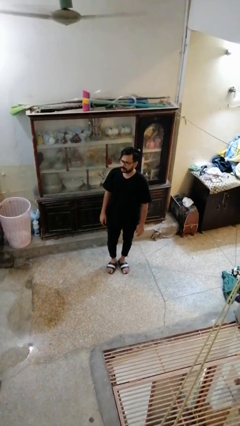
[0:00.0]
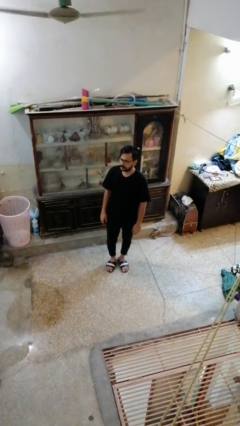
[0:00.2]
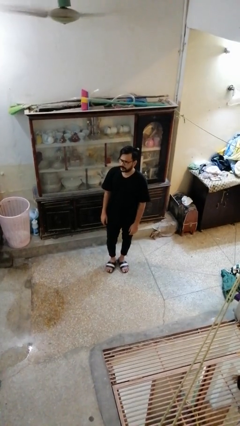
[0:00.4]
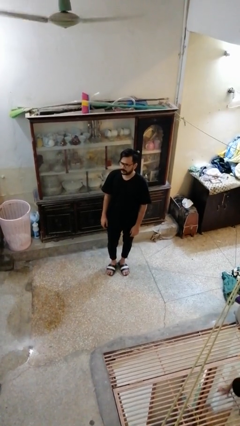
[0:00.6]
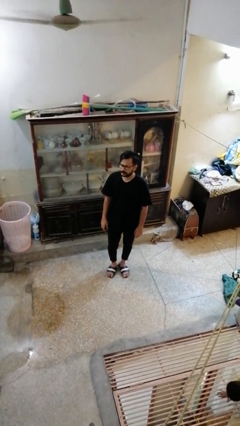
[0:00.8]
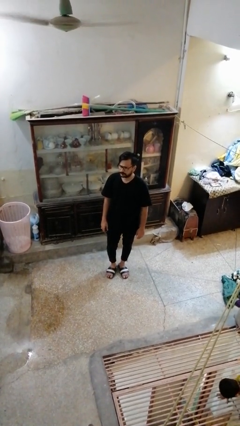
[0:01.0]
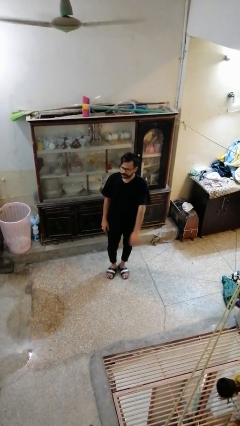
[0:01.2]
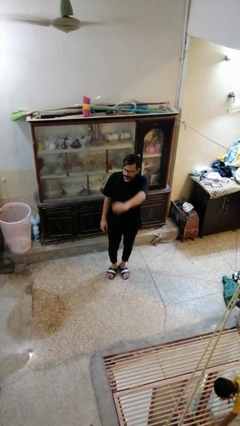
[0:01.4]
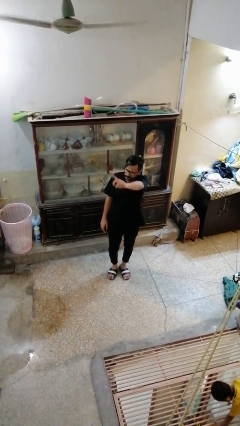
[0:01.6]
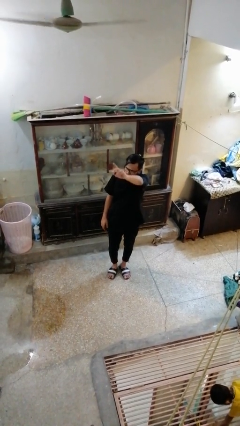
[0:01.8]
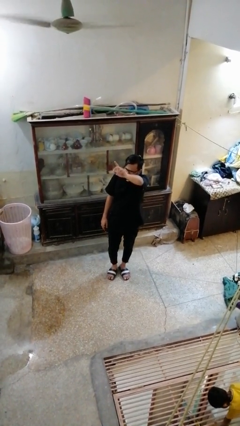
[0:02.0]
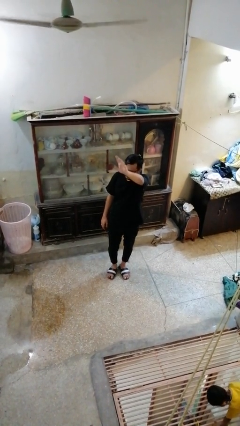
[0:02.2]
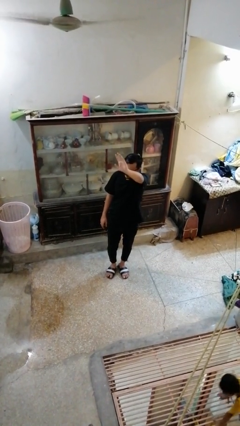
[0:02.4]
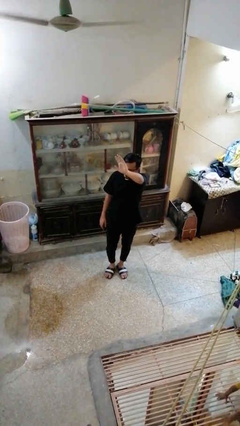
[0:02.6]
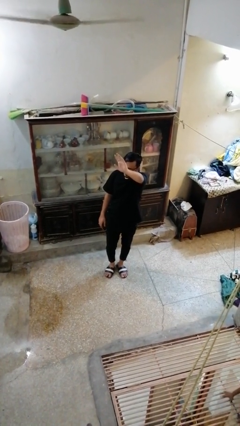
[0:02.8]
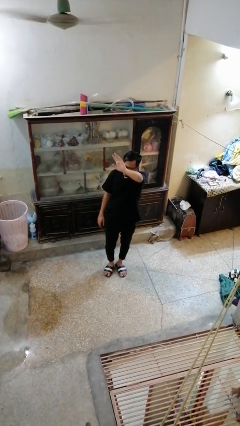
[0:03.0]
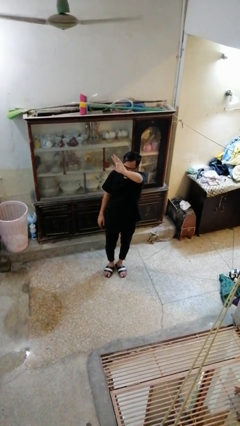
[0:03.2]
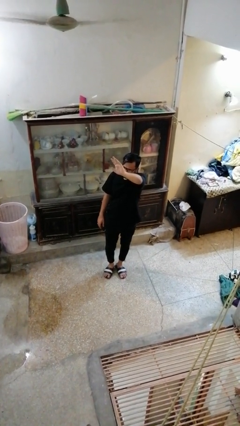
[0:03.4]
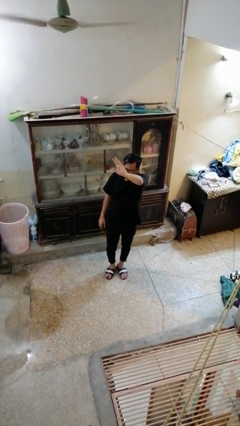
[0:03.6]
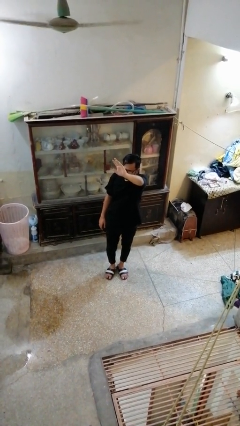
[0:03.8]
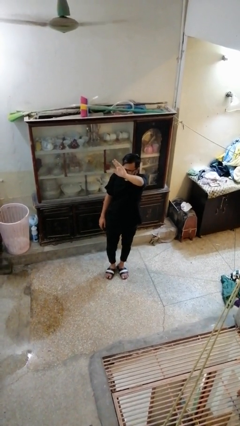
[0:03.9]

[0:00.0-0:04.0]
person gestures raise hand

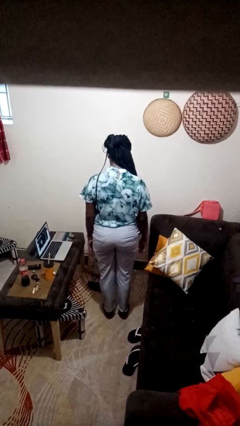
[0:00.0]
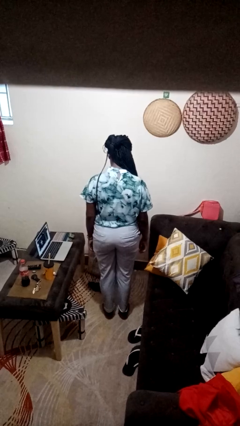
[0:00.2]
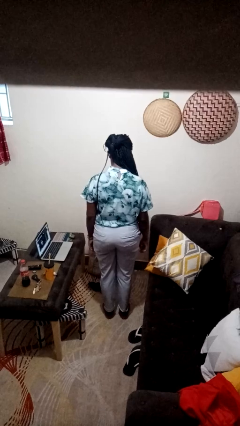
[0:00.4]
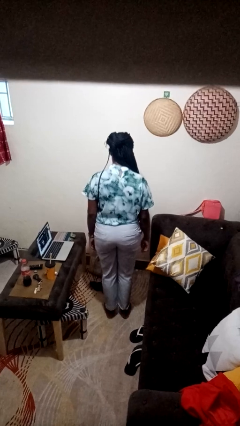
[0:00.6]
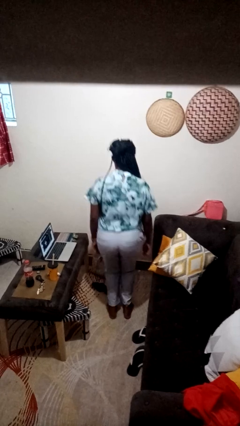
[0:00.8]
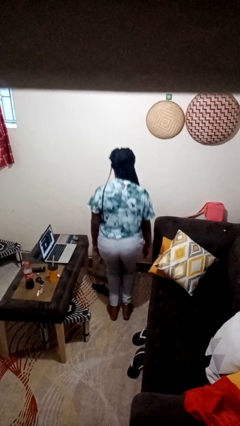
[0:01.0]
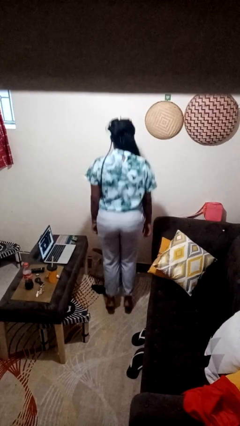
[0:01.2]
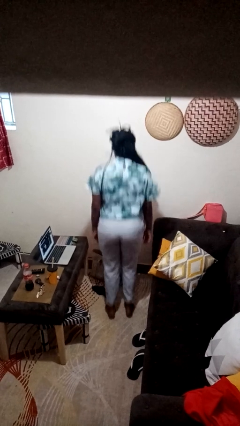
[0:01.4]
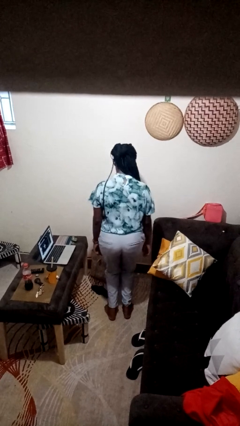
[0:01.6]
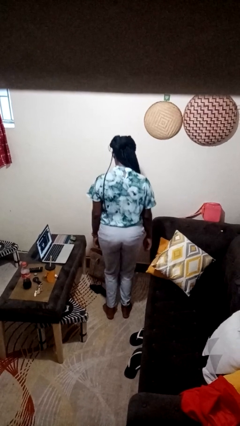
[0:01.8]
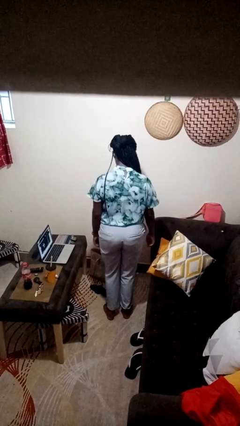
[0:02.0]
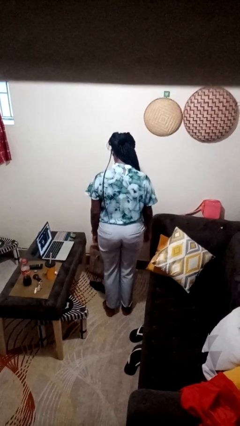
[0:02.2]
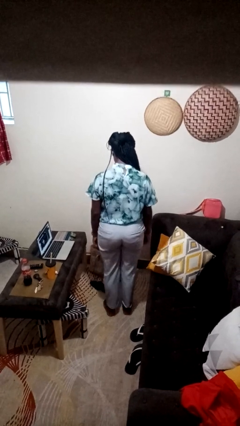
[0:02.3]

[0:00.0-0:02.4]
person jumps

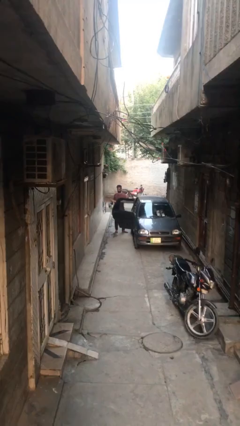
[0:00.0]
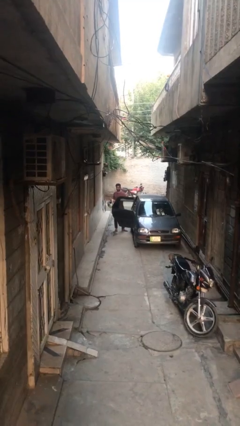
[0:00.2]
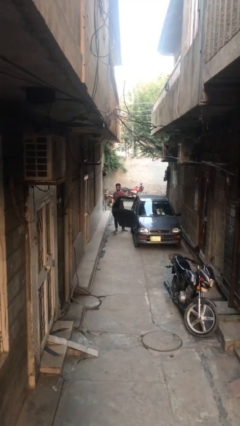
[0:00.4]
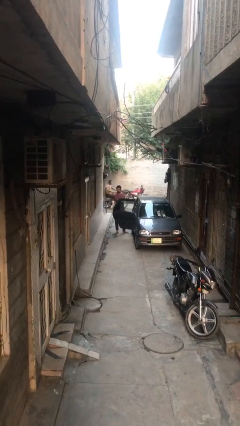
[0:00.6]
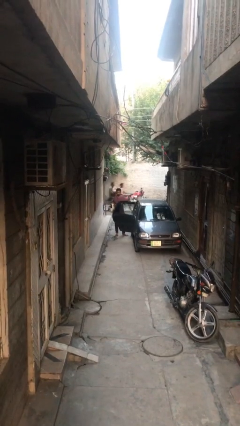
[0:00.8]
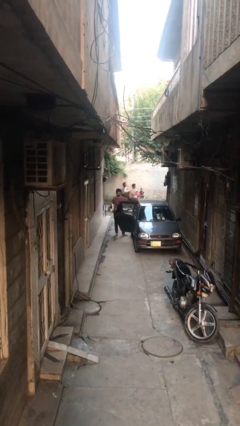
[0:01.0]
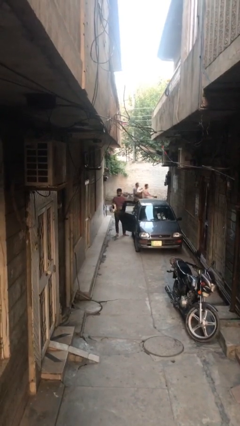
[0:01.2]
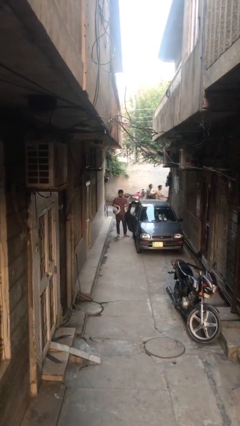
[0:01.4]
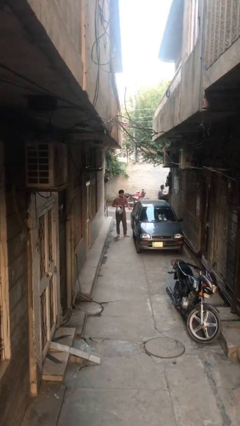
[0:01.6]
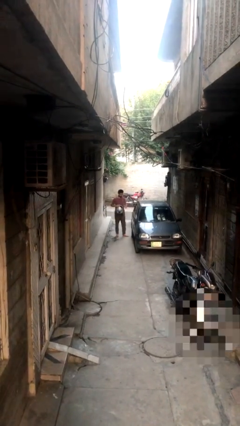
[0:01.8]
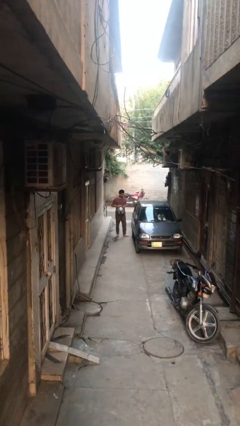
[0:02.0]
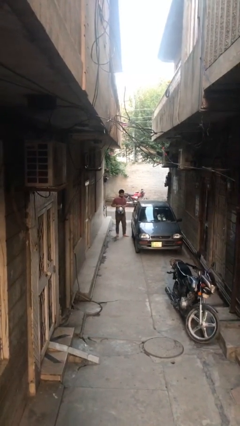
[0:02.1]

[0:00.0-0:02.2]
person closes car door

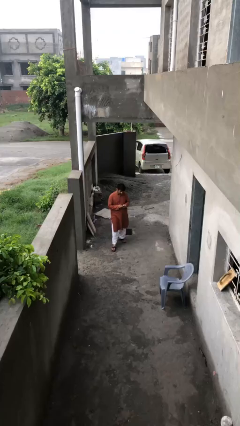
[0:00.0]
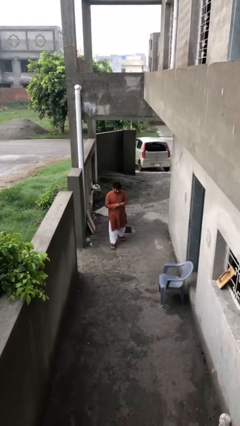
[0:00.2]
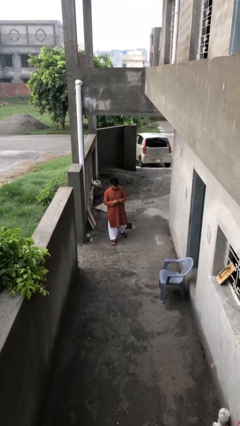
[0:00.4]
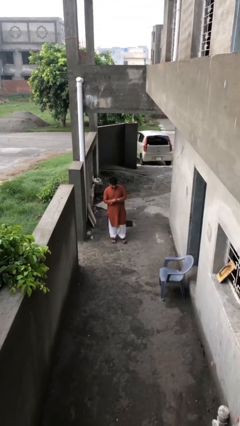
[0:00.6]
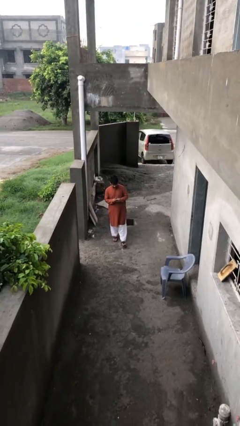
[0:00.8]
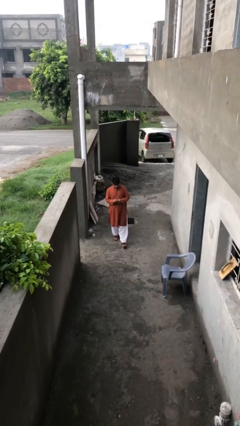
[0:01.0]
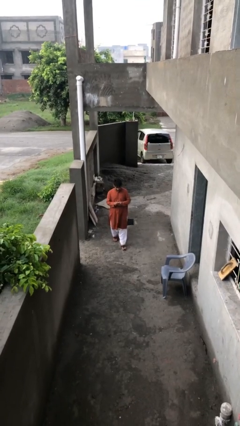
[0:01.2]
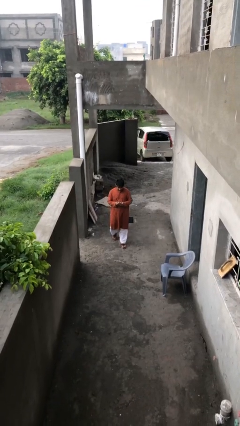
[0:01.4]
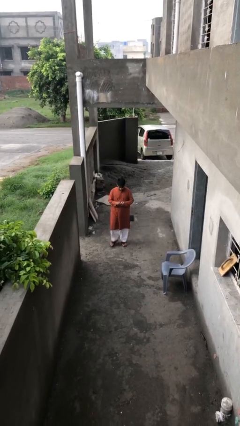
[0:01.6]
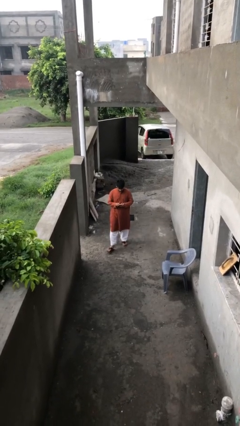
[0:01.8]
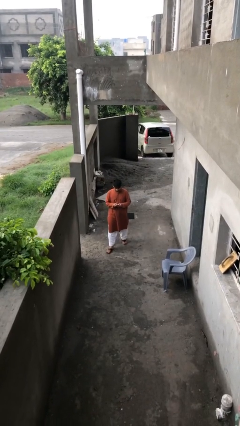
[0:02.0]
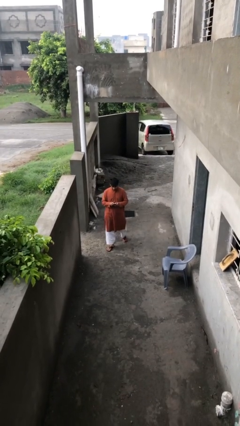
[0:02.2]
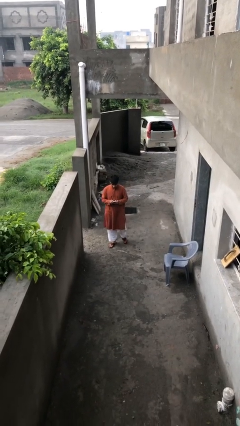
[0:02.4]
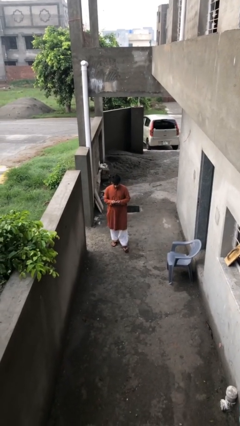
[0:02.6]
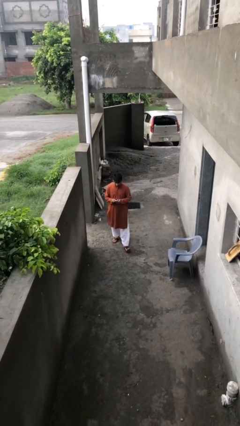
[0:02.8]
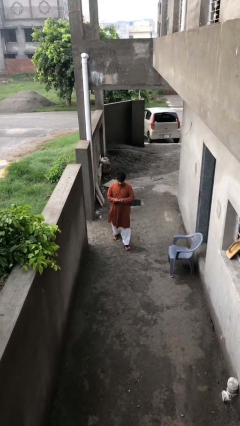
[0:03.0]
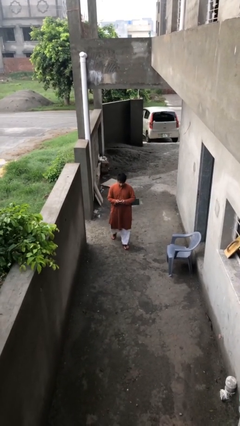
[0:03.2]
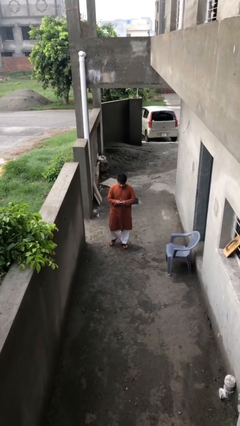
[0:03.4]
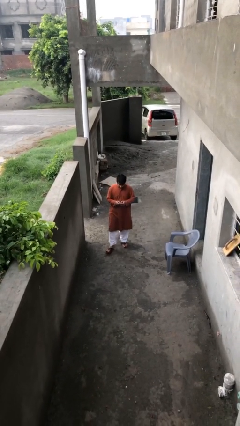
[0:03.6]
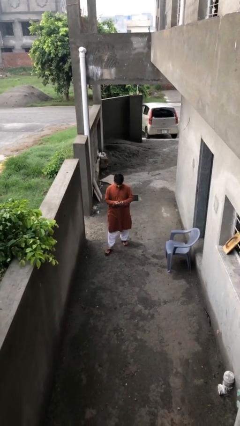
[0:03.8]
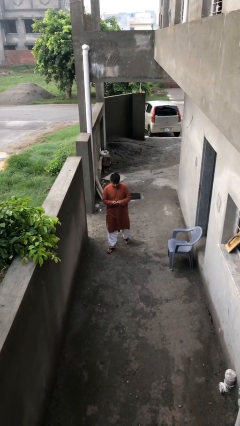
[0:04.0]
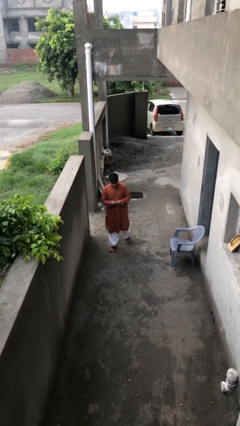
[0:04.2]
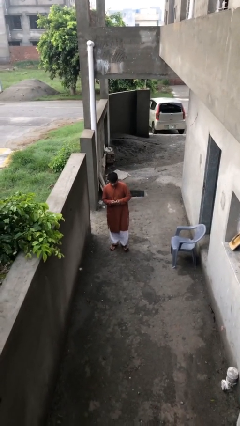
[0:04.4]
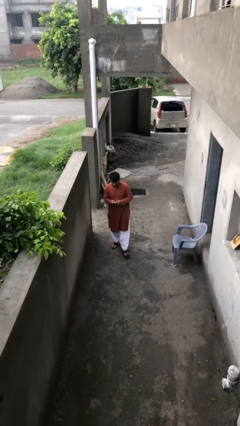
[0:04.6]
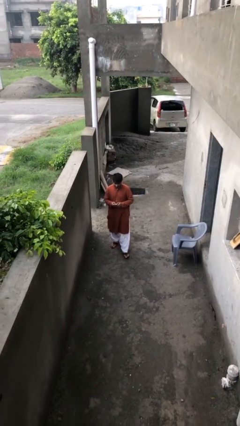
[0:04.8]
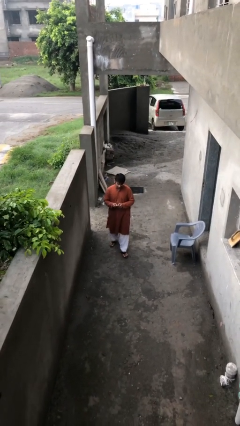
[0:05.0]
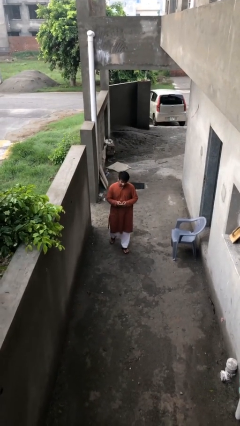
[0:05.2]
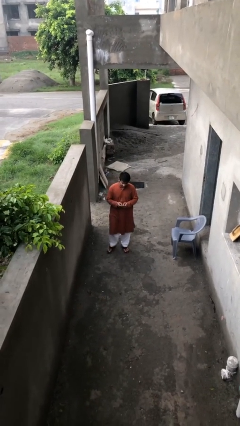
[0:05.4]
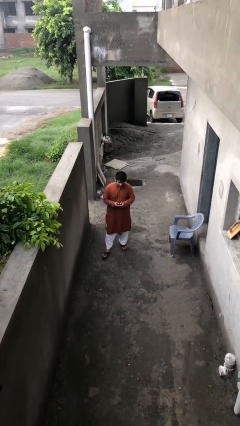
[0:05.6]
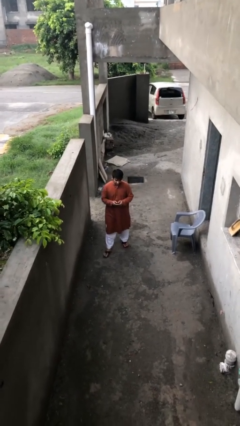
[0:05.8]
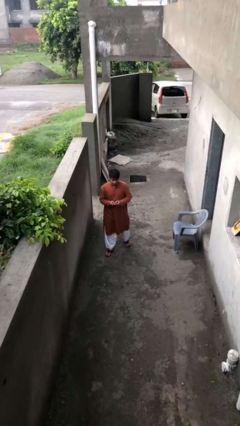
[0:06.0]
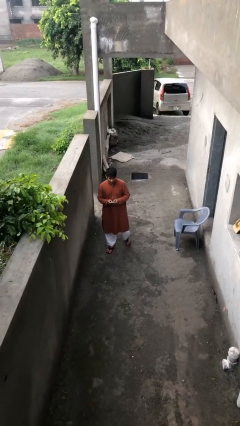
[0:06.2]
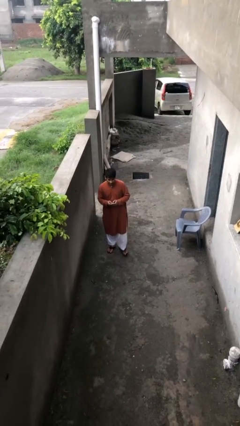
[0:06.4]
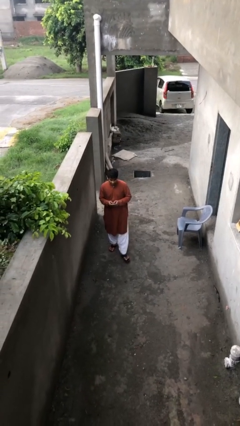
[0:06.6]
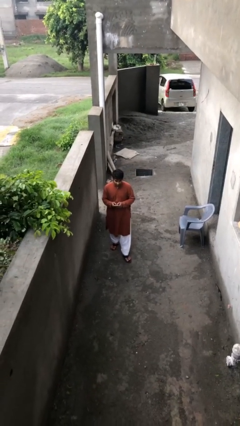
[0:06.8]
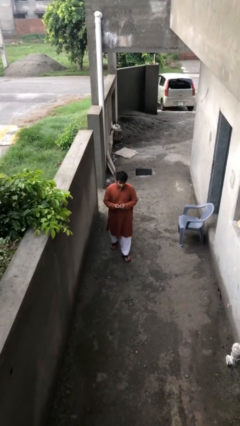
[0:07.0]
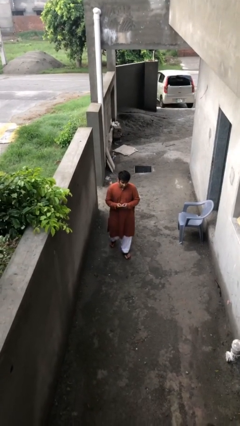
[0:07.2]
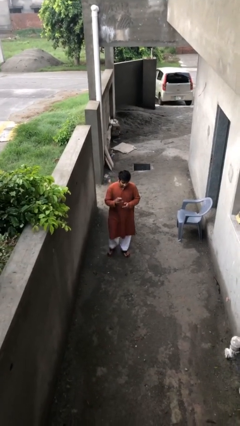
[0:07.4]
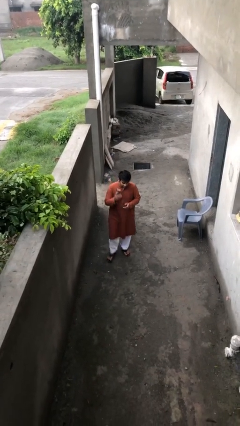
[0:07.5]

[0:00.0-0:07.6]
person texts on phone

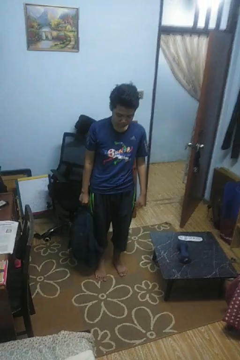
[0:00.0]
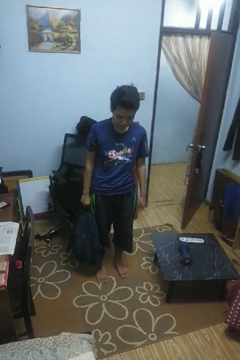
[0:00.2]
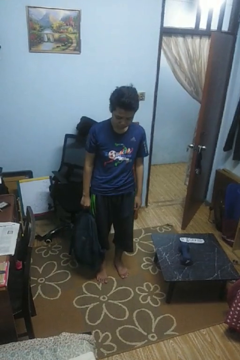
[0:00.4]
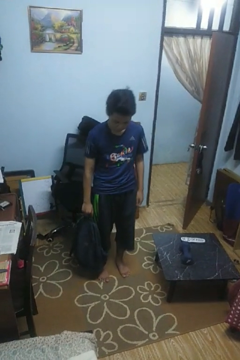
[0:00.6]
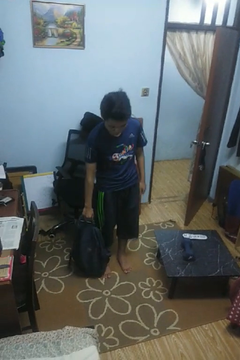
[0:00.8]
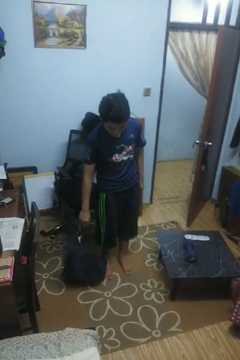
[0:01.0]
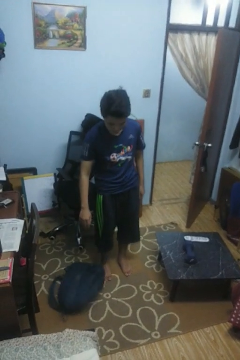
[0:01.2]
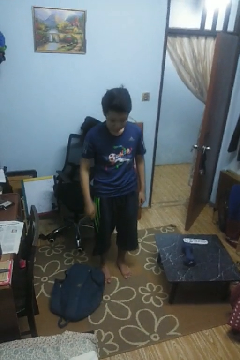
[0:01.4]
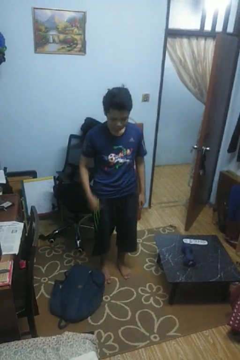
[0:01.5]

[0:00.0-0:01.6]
person drops object
